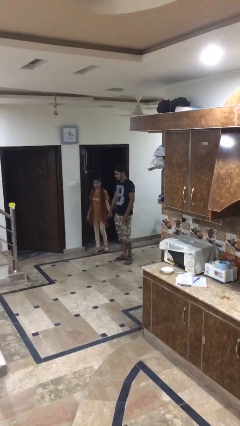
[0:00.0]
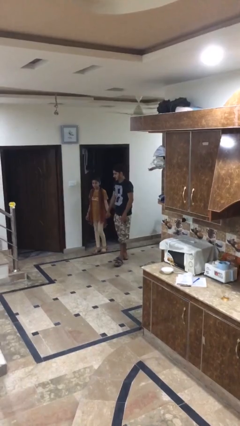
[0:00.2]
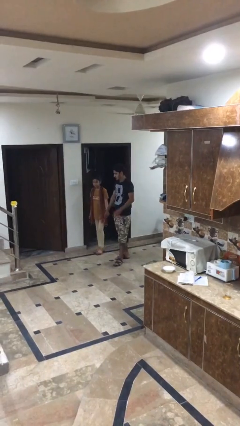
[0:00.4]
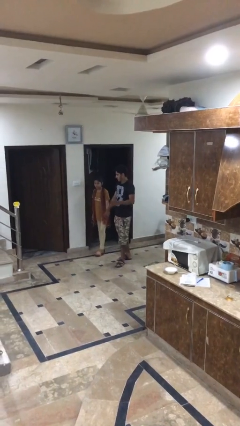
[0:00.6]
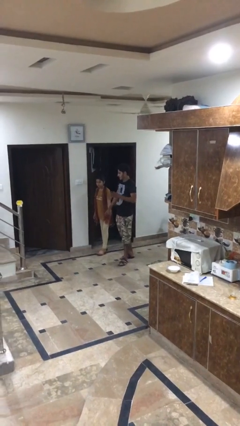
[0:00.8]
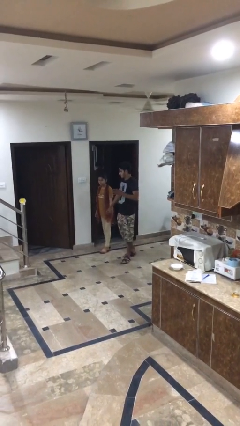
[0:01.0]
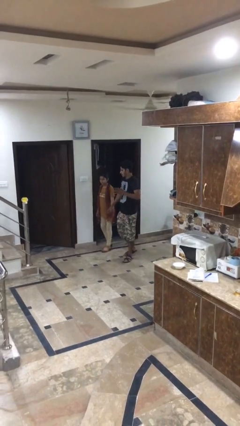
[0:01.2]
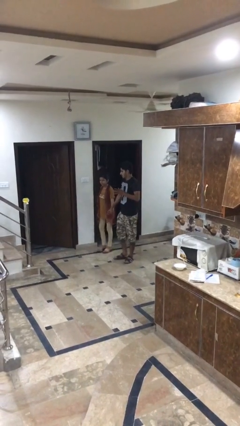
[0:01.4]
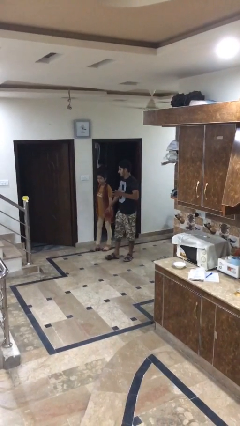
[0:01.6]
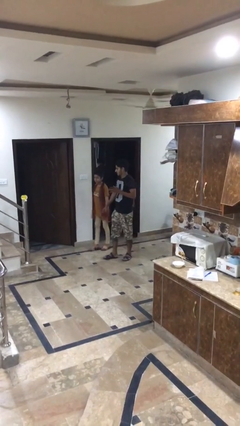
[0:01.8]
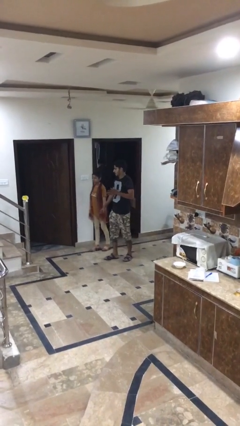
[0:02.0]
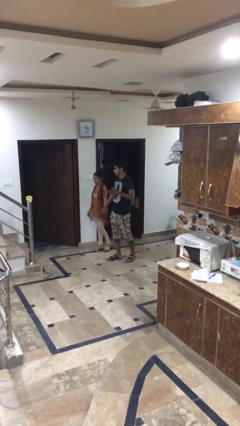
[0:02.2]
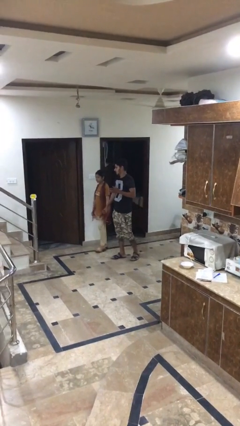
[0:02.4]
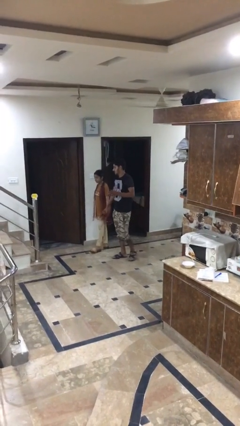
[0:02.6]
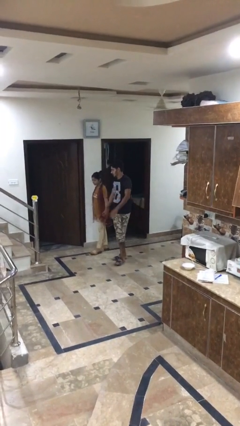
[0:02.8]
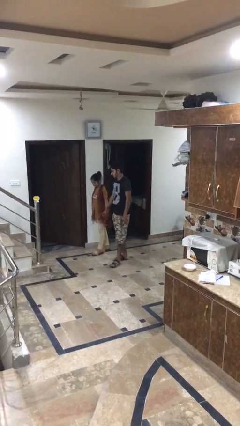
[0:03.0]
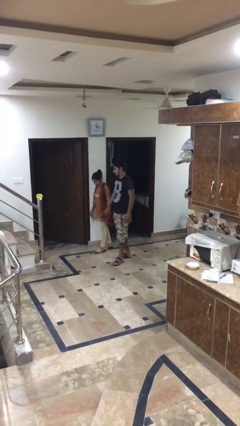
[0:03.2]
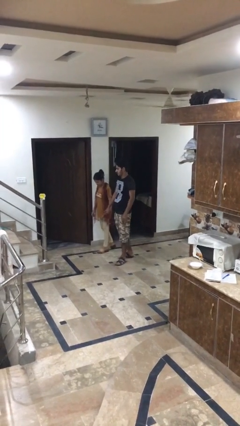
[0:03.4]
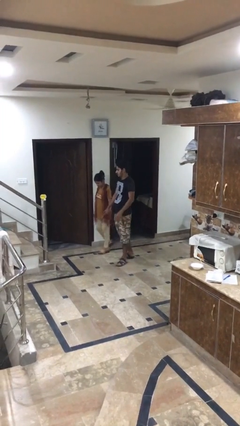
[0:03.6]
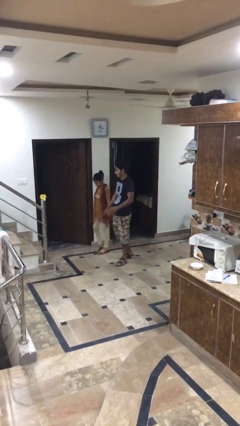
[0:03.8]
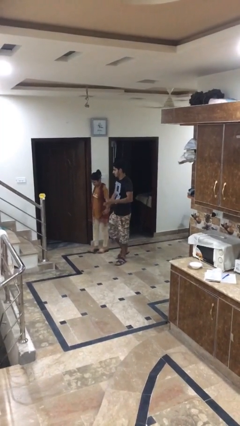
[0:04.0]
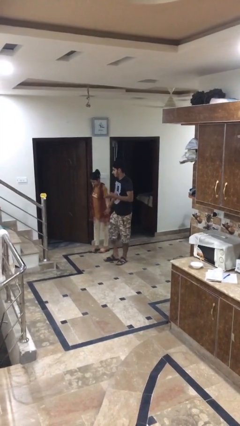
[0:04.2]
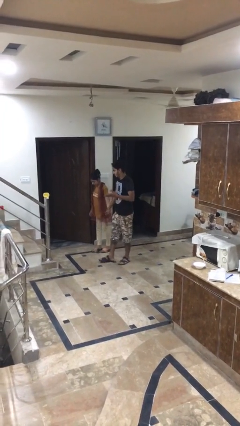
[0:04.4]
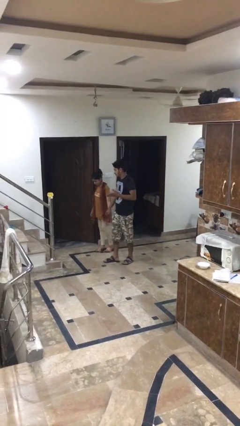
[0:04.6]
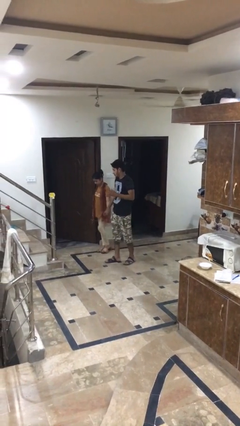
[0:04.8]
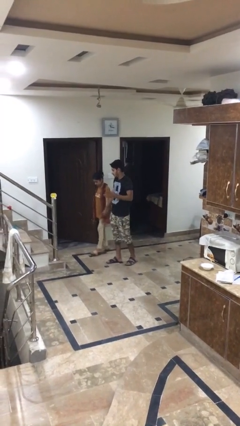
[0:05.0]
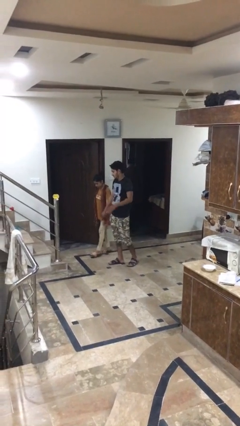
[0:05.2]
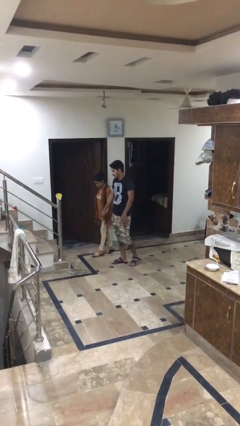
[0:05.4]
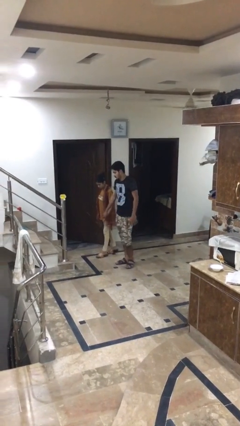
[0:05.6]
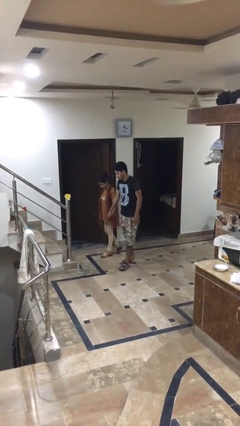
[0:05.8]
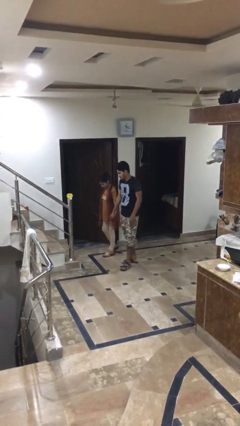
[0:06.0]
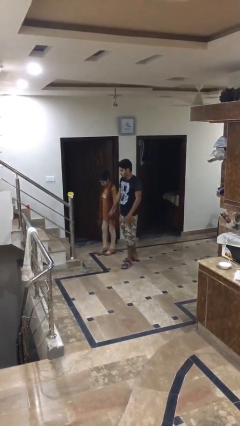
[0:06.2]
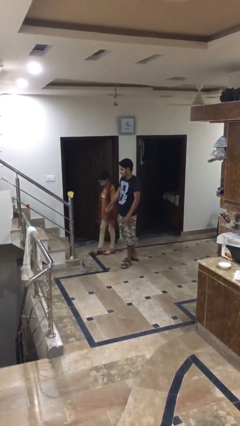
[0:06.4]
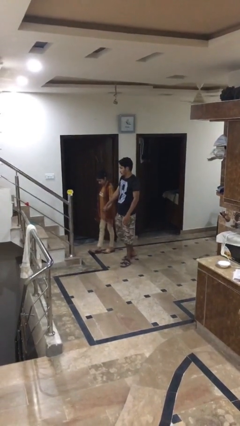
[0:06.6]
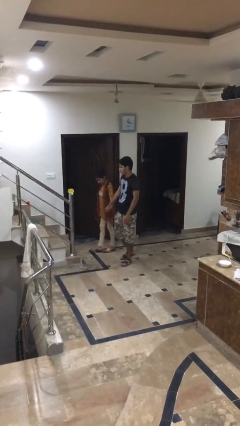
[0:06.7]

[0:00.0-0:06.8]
person holds hand

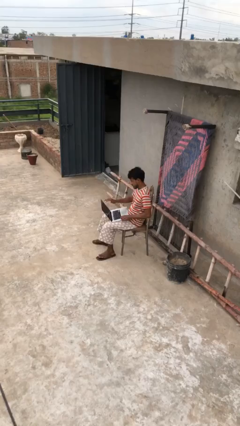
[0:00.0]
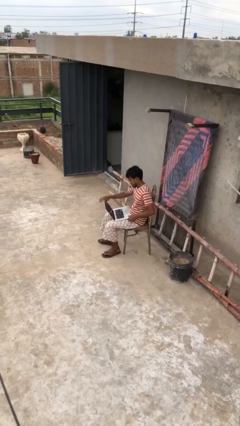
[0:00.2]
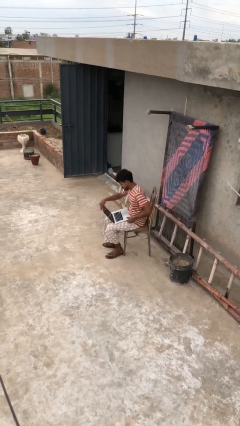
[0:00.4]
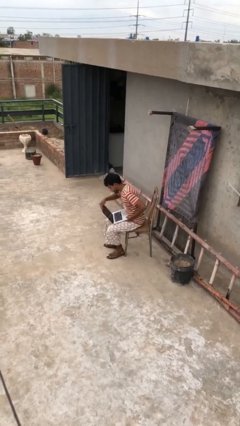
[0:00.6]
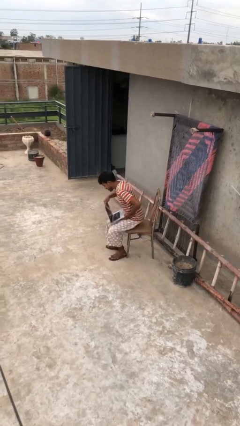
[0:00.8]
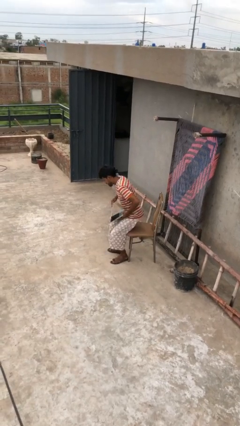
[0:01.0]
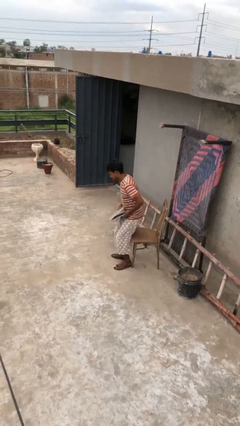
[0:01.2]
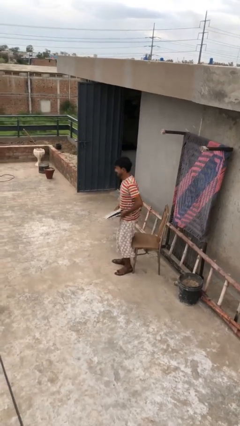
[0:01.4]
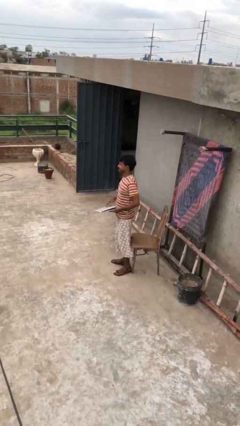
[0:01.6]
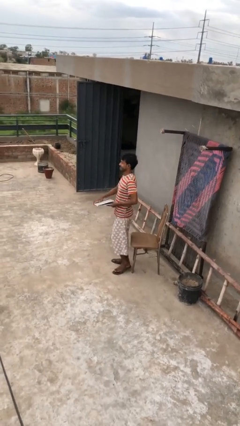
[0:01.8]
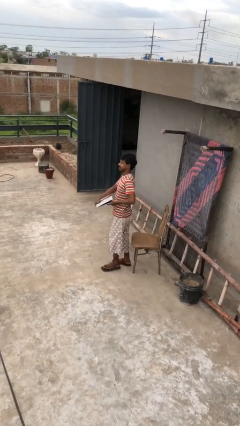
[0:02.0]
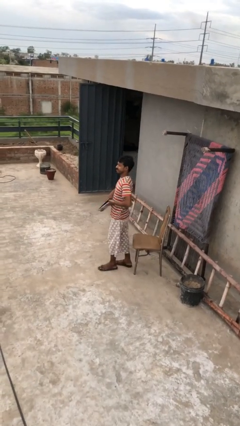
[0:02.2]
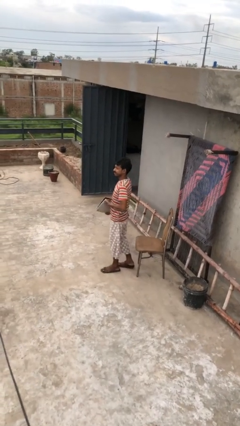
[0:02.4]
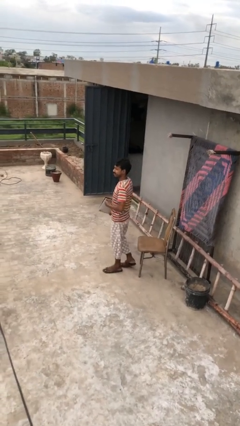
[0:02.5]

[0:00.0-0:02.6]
person stands up

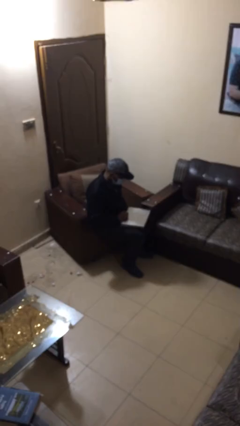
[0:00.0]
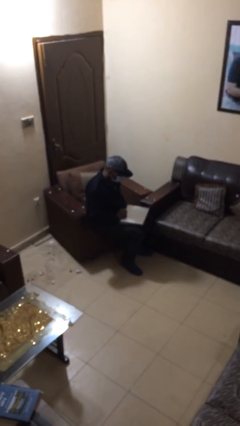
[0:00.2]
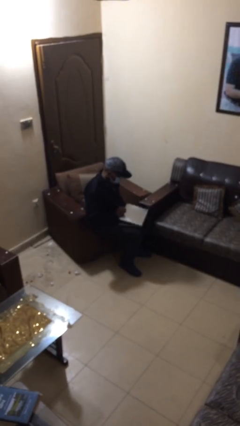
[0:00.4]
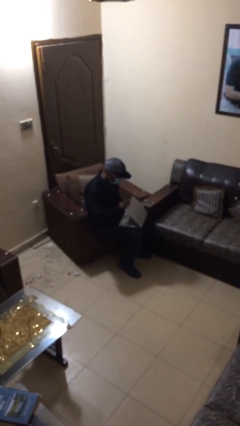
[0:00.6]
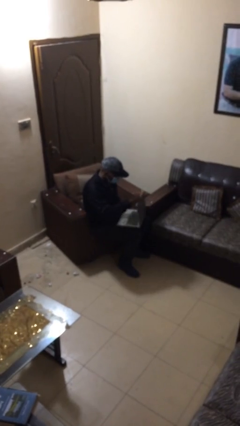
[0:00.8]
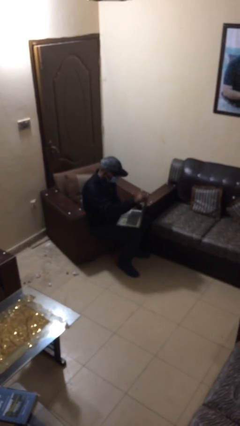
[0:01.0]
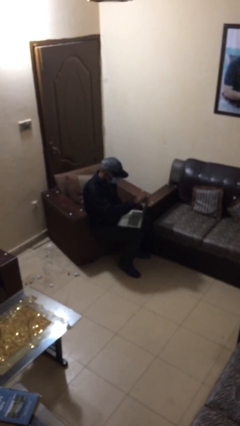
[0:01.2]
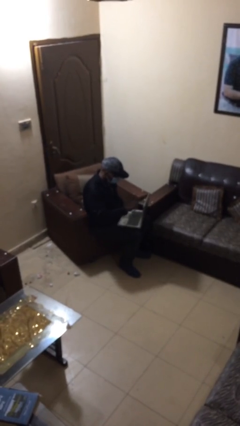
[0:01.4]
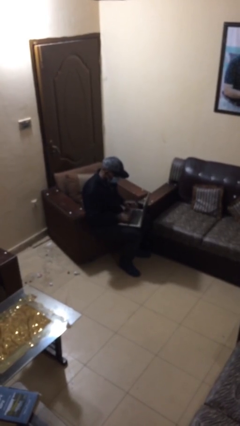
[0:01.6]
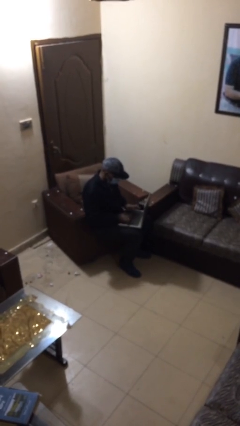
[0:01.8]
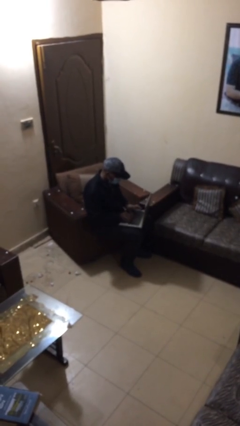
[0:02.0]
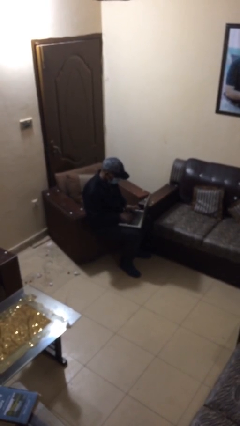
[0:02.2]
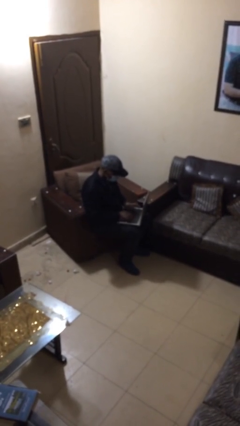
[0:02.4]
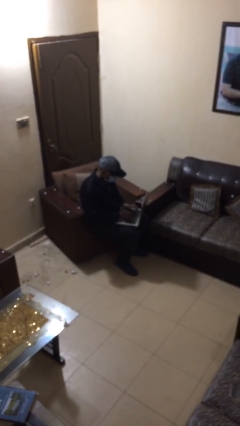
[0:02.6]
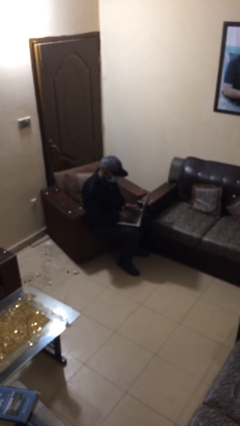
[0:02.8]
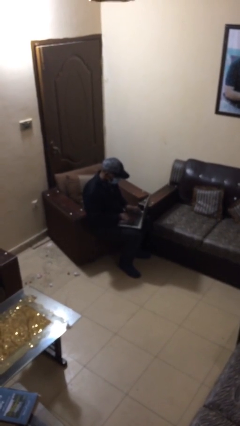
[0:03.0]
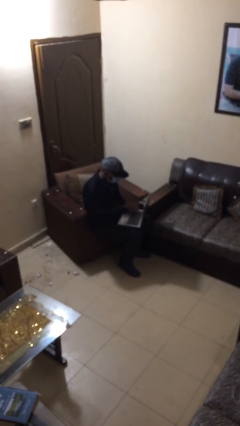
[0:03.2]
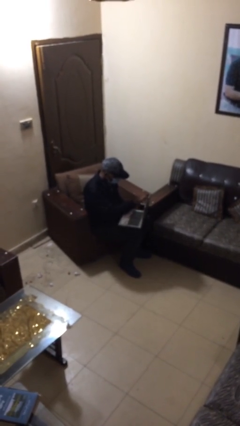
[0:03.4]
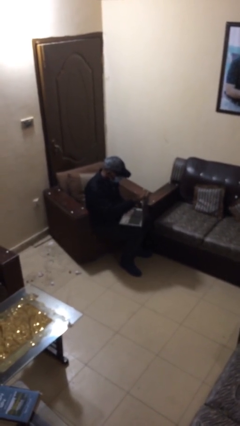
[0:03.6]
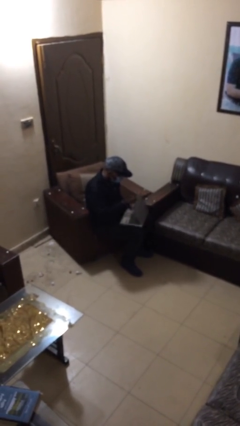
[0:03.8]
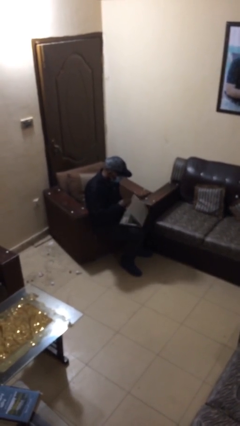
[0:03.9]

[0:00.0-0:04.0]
person interacts with laptop

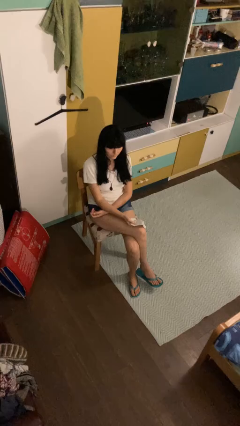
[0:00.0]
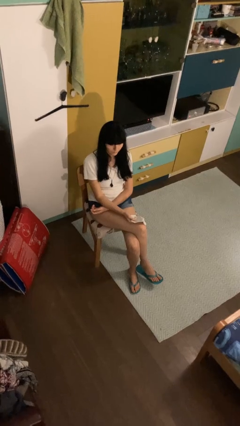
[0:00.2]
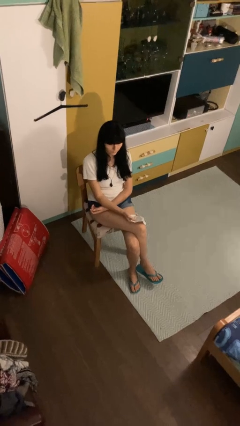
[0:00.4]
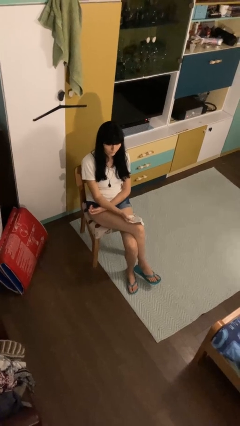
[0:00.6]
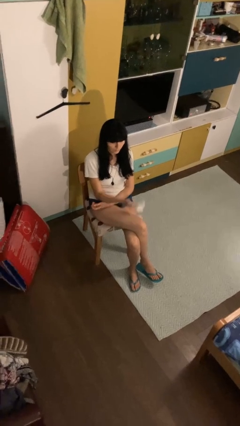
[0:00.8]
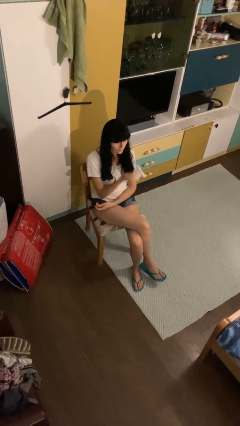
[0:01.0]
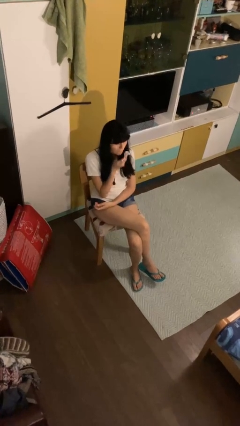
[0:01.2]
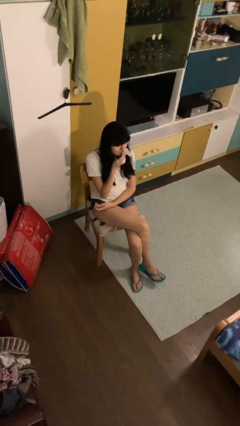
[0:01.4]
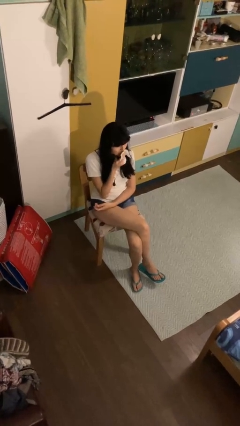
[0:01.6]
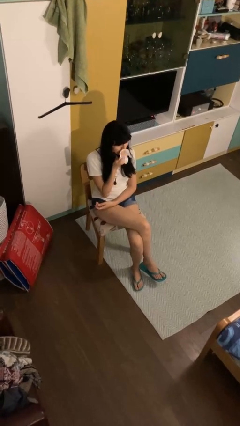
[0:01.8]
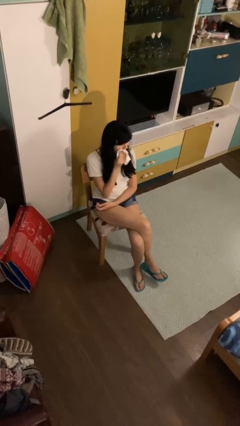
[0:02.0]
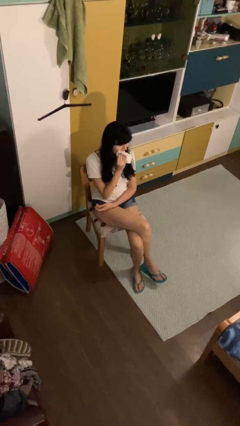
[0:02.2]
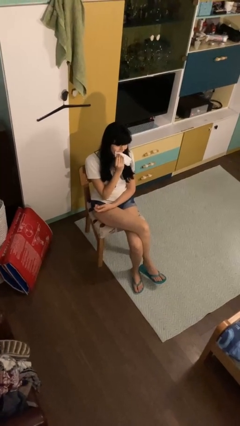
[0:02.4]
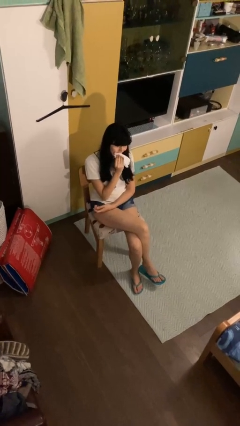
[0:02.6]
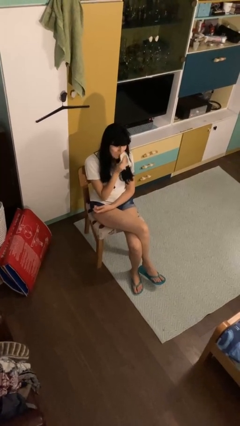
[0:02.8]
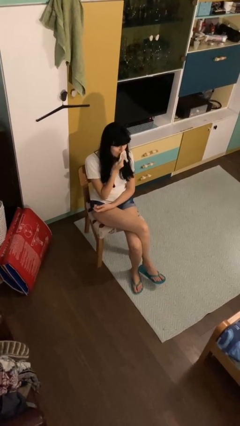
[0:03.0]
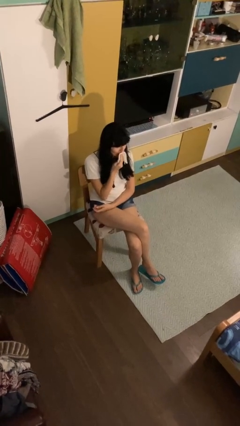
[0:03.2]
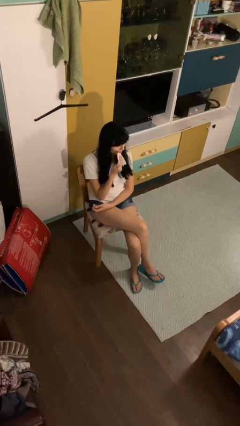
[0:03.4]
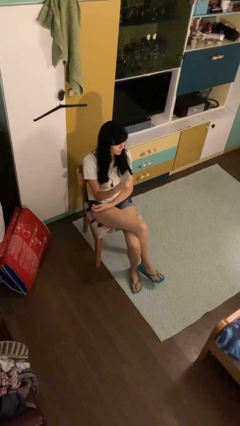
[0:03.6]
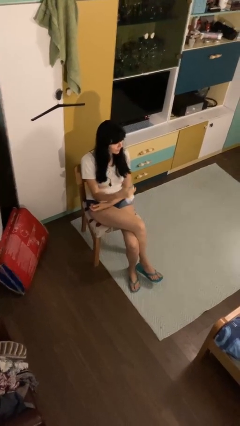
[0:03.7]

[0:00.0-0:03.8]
person wipes mouth with napkin

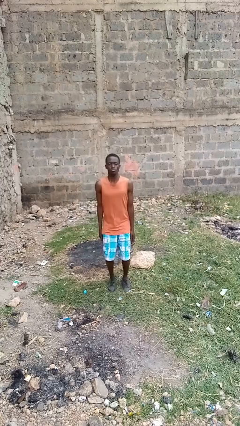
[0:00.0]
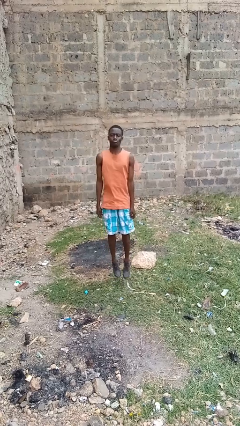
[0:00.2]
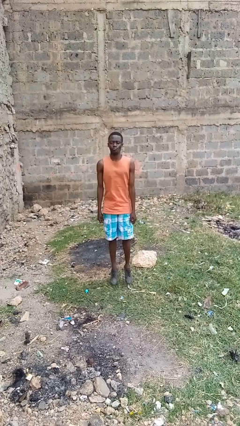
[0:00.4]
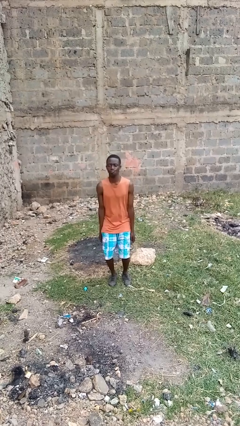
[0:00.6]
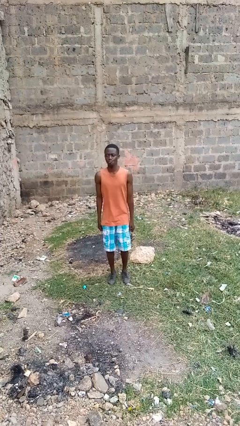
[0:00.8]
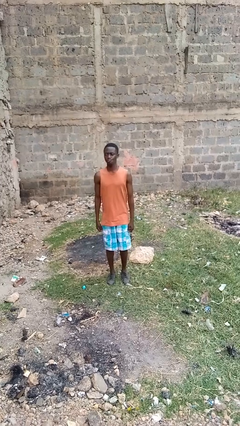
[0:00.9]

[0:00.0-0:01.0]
person jumps
